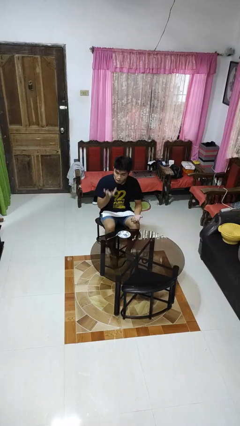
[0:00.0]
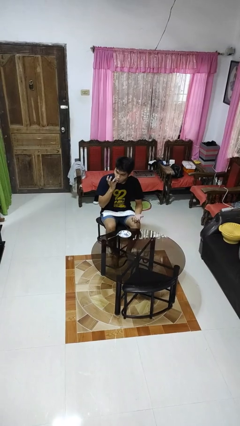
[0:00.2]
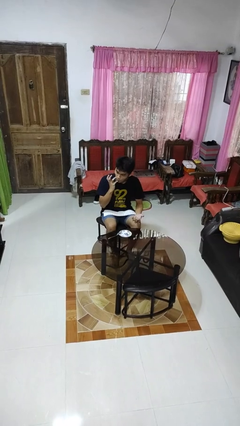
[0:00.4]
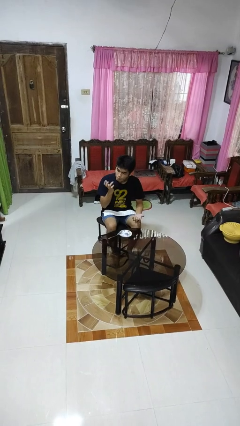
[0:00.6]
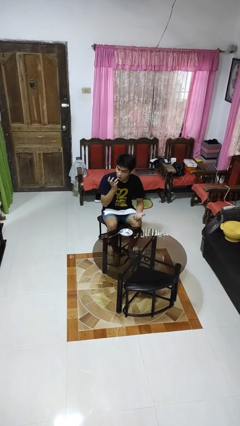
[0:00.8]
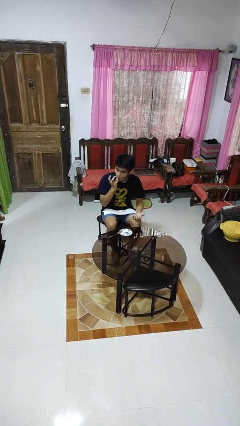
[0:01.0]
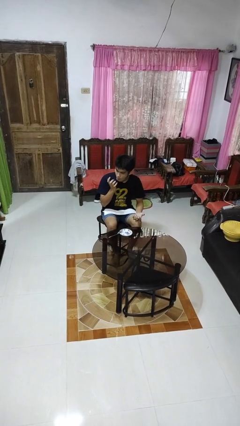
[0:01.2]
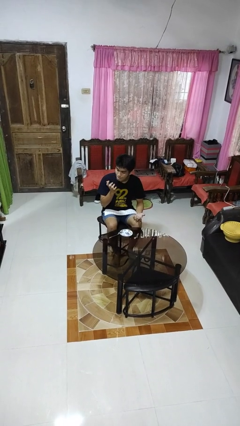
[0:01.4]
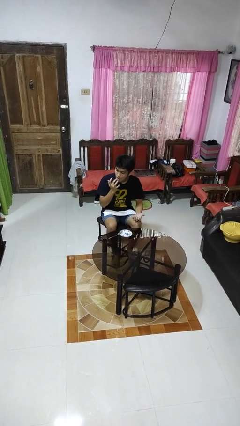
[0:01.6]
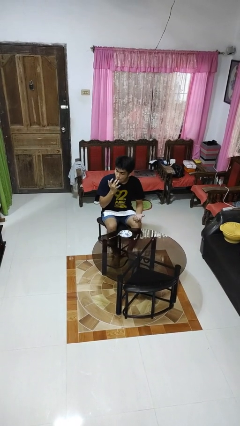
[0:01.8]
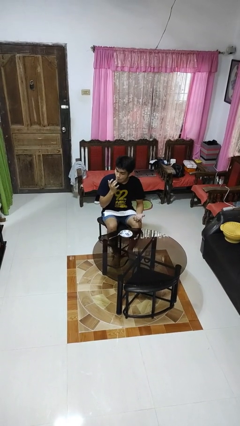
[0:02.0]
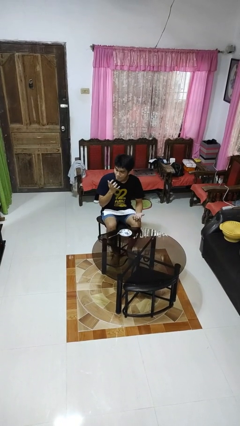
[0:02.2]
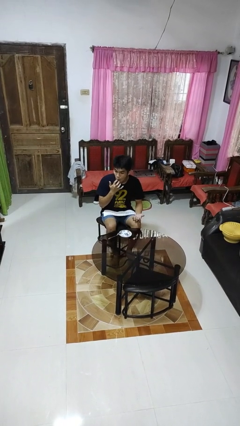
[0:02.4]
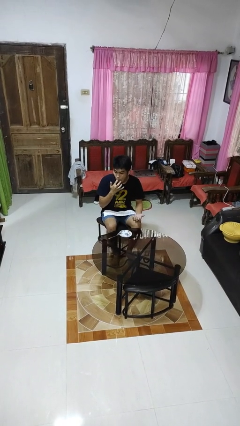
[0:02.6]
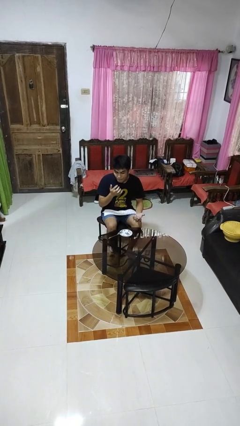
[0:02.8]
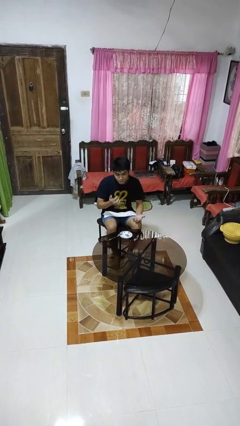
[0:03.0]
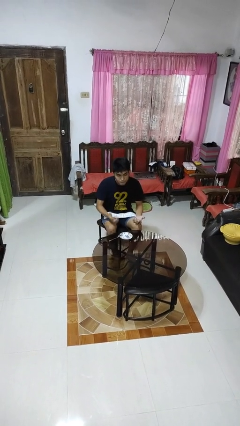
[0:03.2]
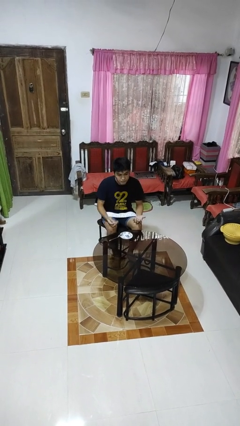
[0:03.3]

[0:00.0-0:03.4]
person licks fingers

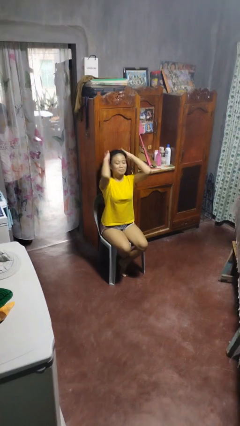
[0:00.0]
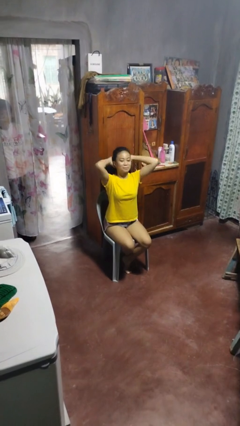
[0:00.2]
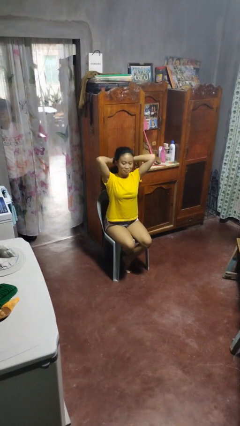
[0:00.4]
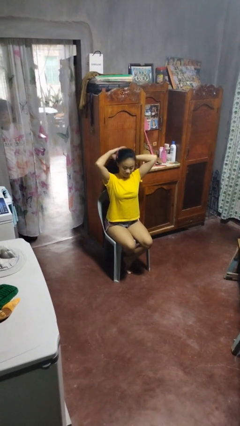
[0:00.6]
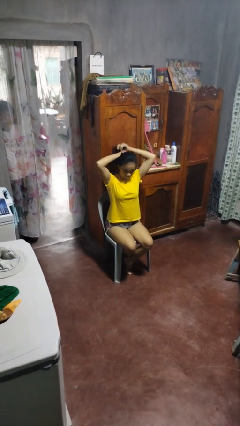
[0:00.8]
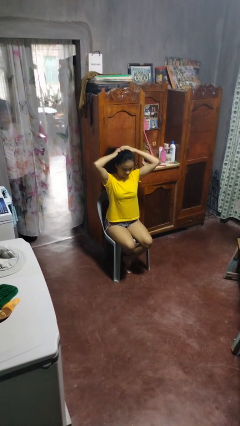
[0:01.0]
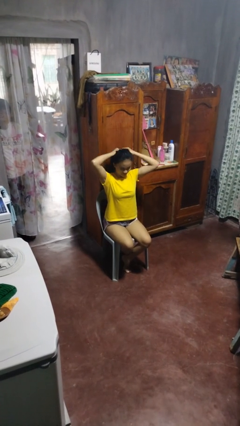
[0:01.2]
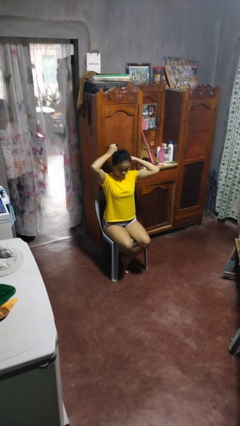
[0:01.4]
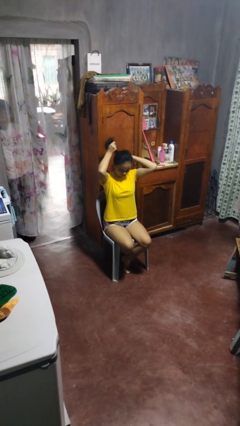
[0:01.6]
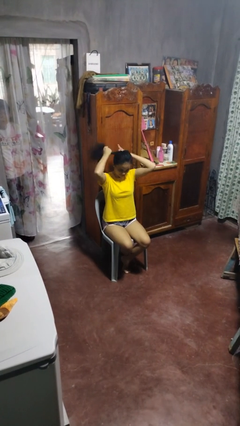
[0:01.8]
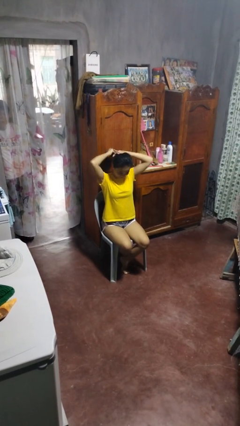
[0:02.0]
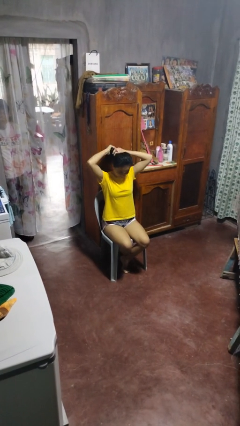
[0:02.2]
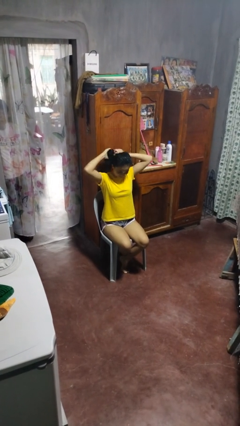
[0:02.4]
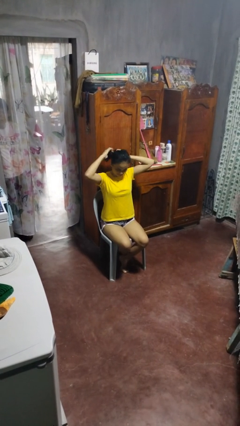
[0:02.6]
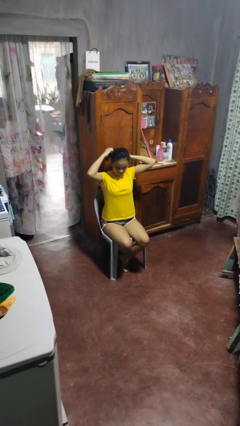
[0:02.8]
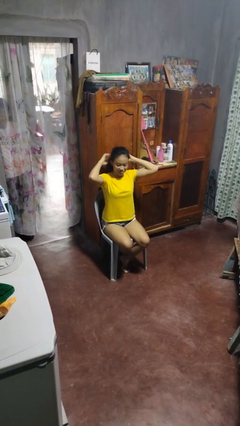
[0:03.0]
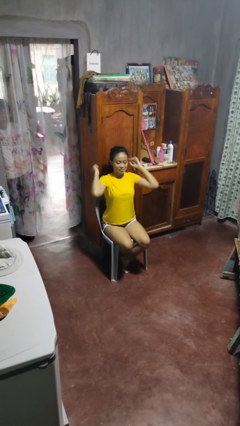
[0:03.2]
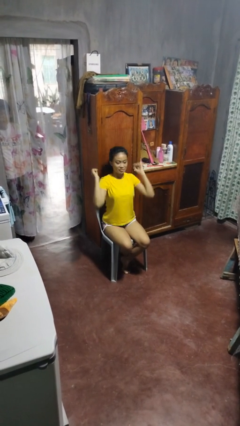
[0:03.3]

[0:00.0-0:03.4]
person puts hair in ponytail

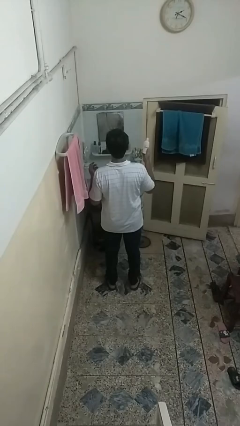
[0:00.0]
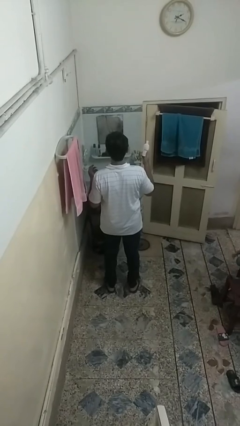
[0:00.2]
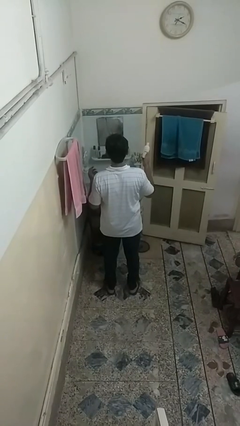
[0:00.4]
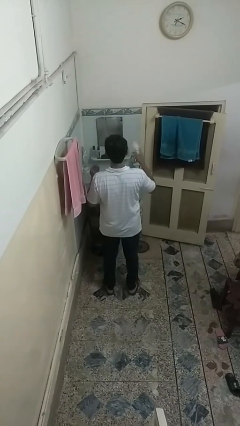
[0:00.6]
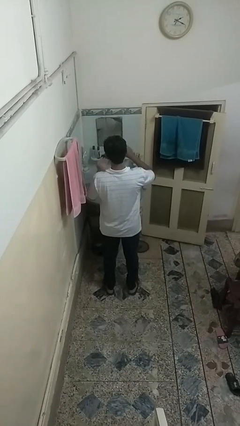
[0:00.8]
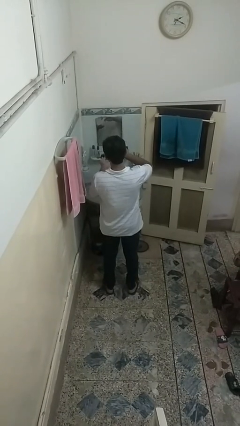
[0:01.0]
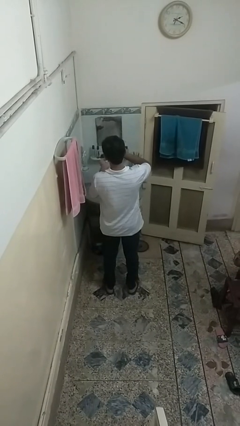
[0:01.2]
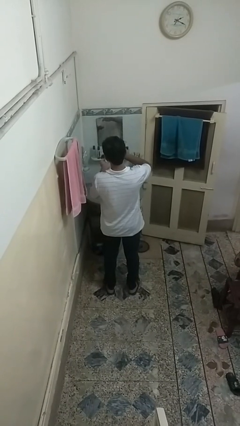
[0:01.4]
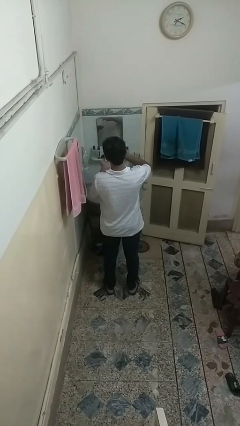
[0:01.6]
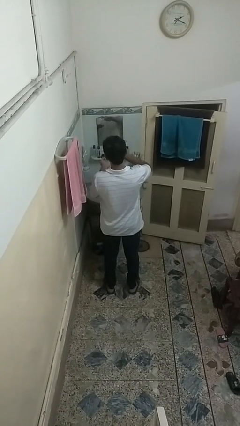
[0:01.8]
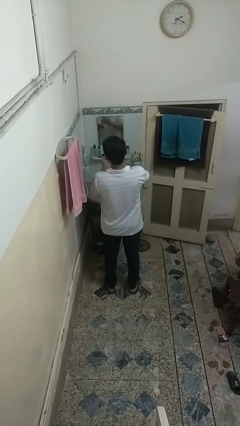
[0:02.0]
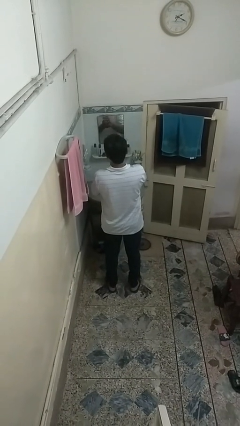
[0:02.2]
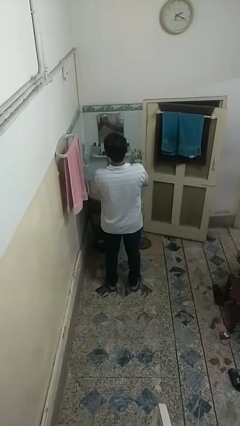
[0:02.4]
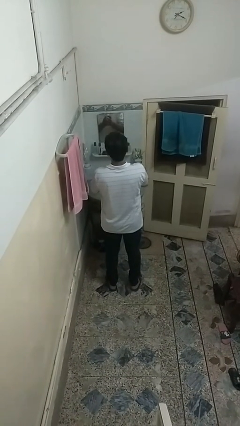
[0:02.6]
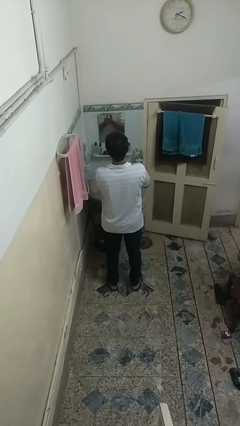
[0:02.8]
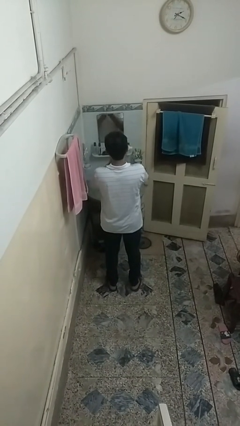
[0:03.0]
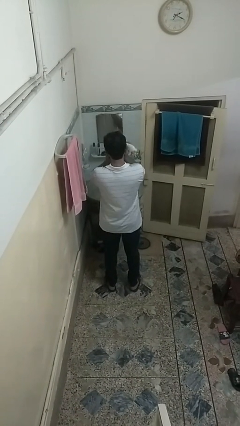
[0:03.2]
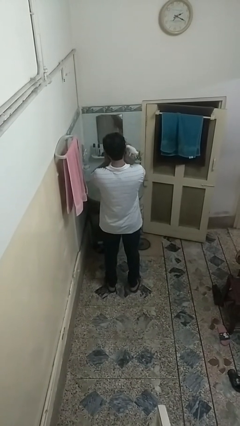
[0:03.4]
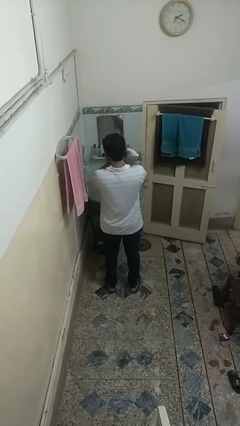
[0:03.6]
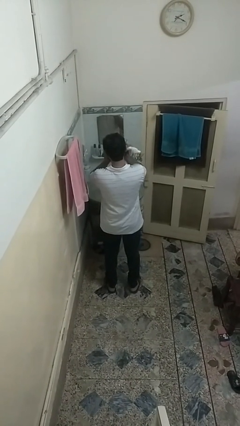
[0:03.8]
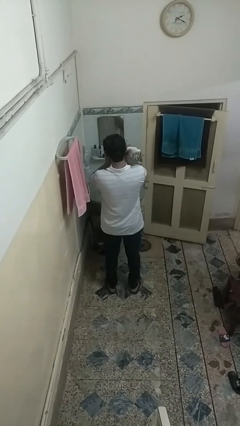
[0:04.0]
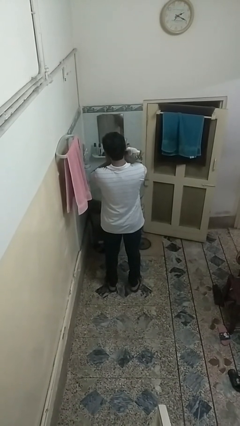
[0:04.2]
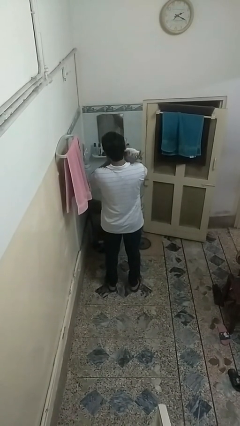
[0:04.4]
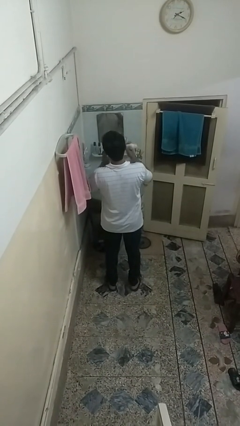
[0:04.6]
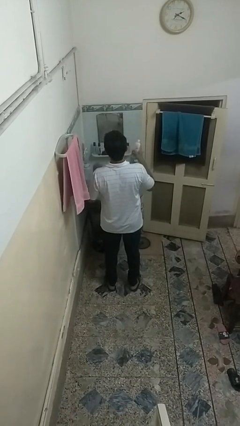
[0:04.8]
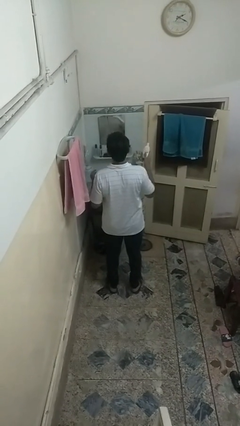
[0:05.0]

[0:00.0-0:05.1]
person applies facial moisturizer

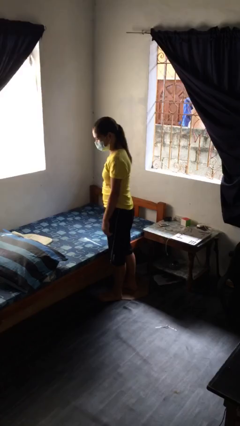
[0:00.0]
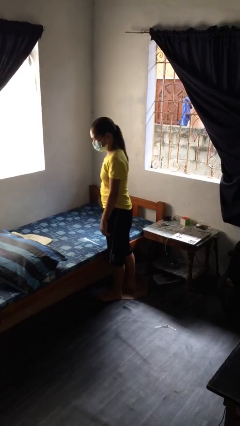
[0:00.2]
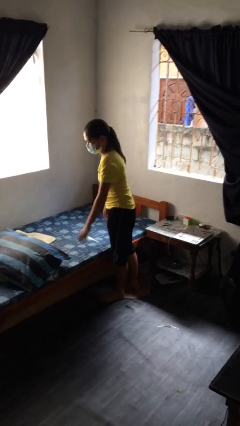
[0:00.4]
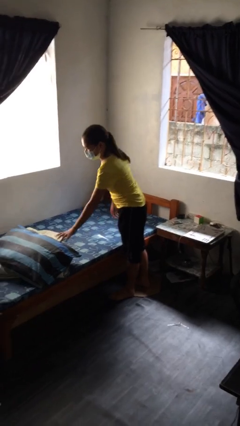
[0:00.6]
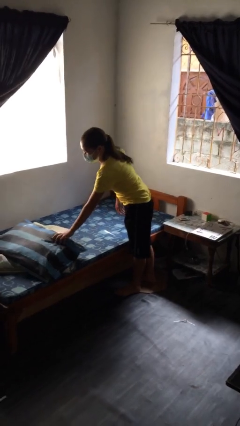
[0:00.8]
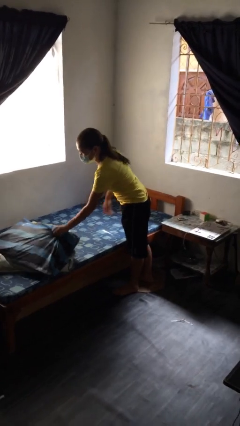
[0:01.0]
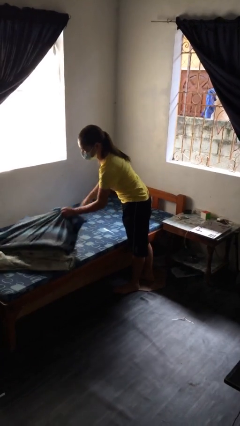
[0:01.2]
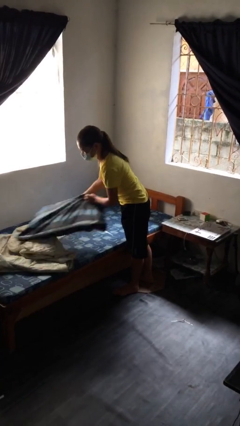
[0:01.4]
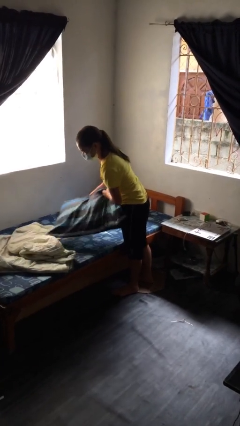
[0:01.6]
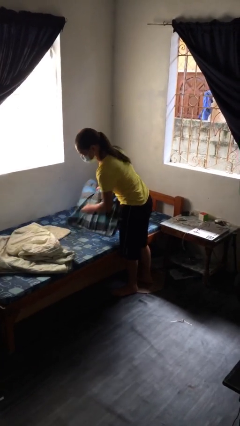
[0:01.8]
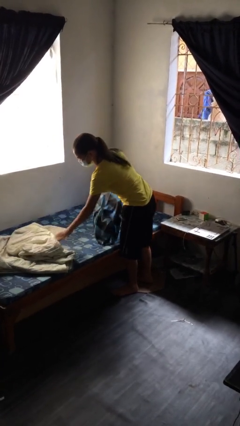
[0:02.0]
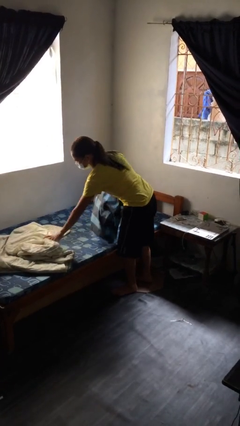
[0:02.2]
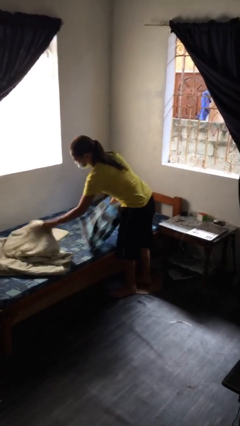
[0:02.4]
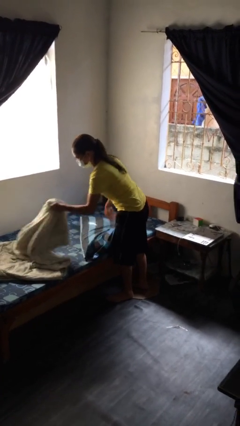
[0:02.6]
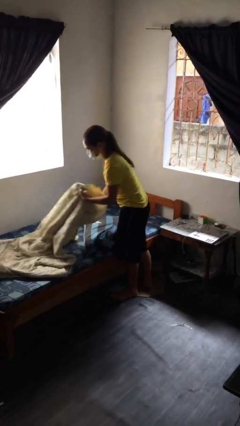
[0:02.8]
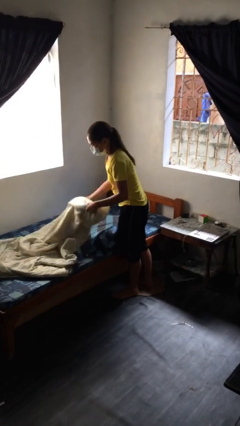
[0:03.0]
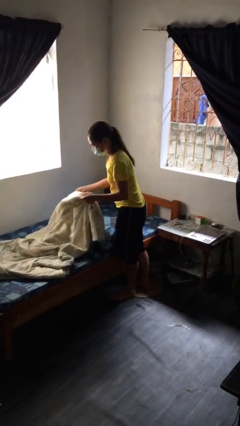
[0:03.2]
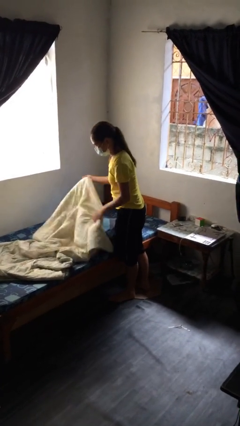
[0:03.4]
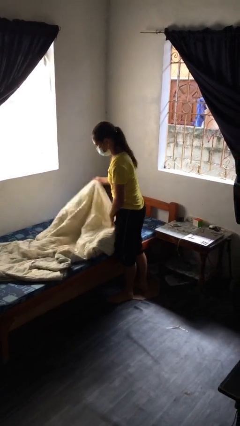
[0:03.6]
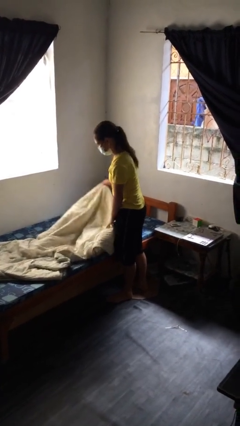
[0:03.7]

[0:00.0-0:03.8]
person makes bed

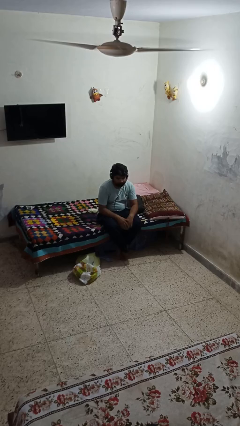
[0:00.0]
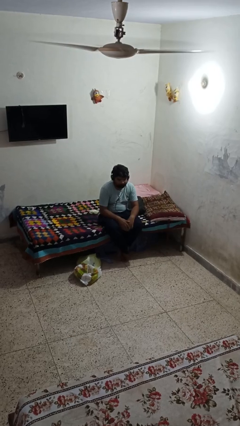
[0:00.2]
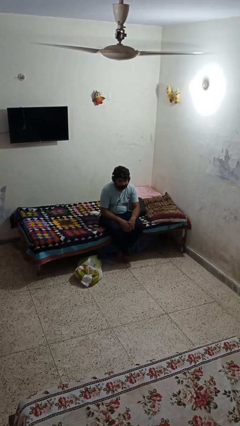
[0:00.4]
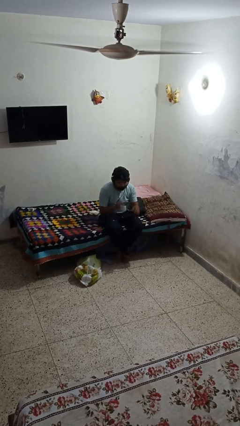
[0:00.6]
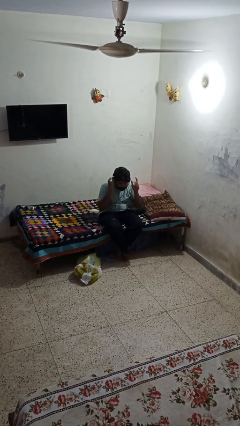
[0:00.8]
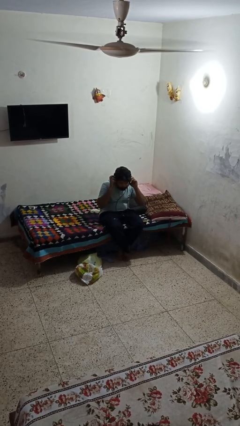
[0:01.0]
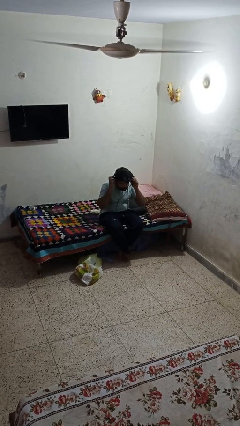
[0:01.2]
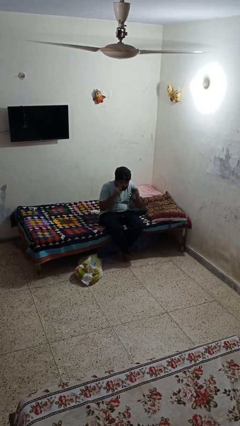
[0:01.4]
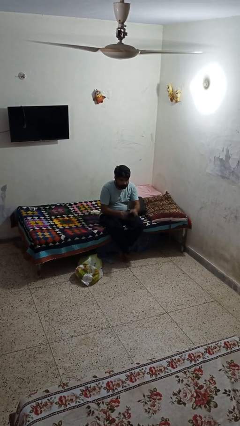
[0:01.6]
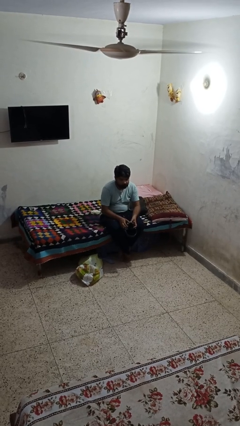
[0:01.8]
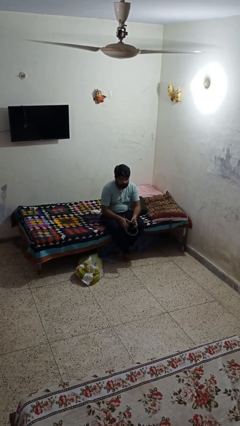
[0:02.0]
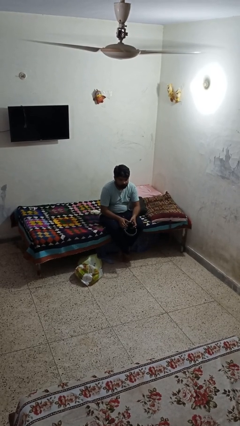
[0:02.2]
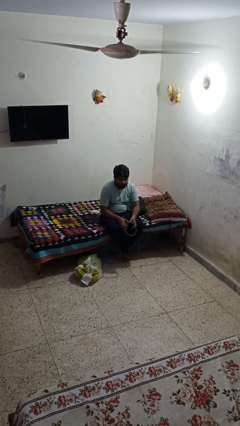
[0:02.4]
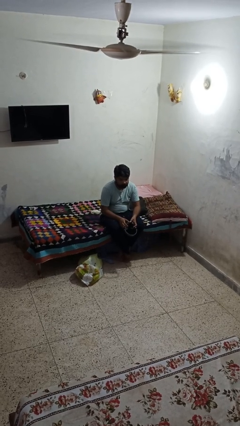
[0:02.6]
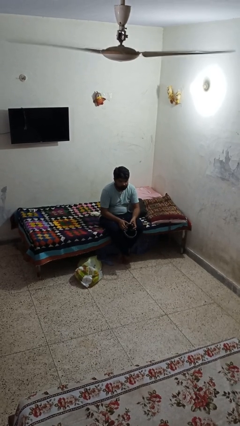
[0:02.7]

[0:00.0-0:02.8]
person takes off headphones
